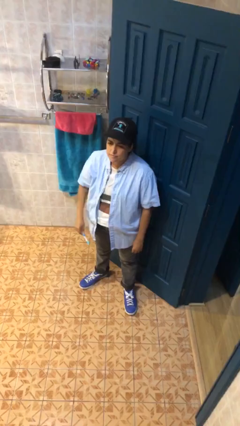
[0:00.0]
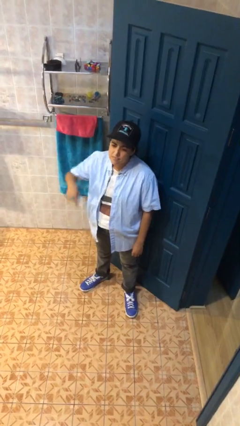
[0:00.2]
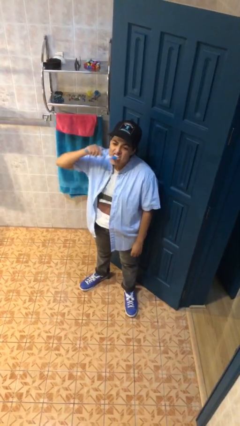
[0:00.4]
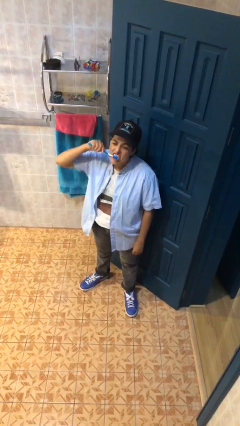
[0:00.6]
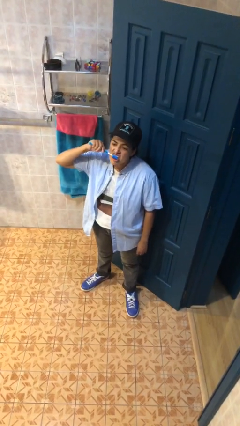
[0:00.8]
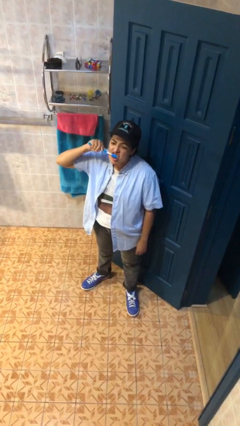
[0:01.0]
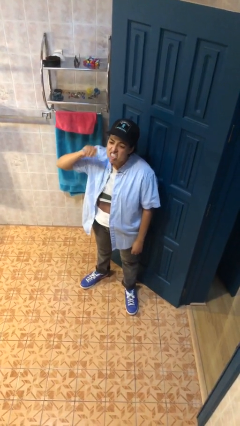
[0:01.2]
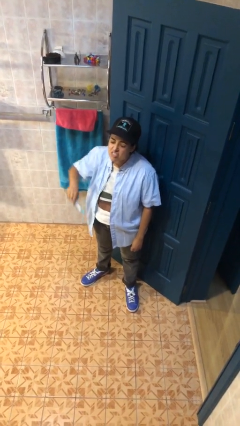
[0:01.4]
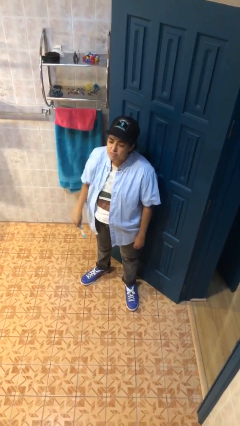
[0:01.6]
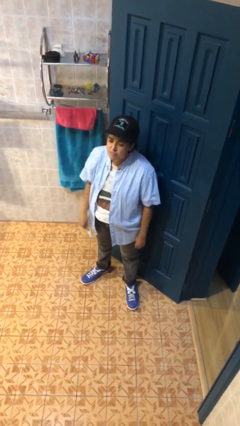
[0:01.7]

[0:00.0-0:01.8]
person brushes teeth

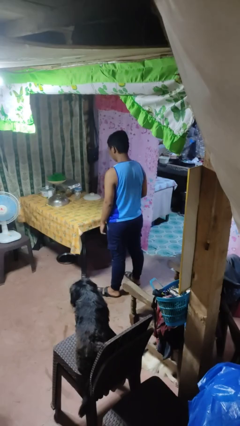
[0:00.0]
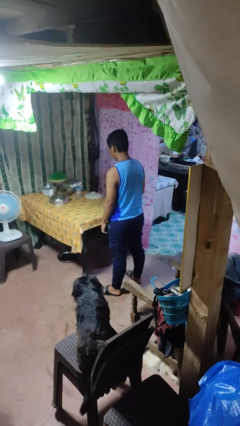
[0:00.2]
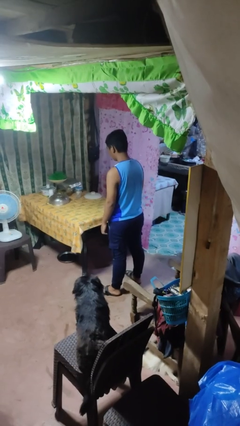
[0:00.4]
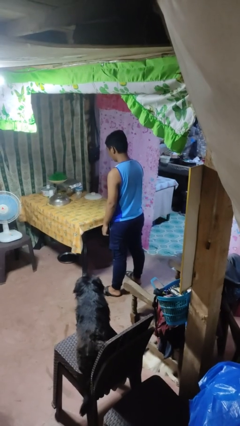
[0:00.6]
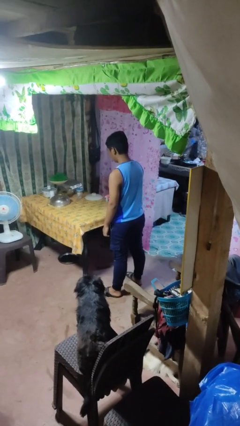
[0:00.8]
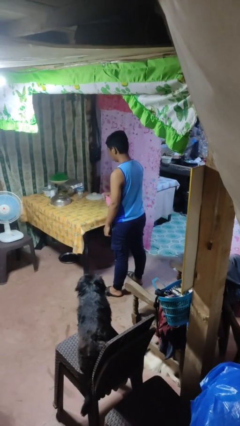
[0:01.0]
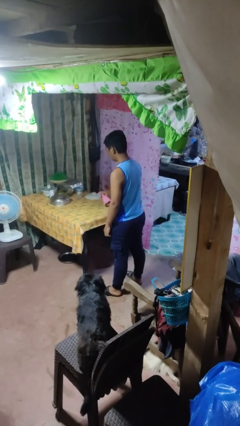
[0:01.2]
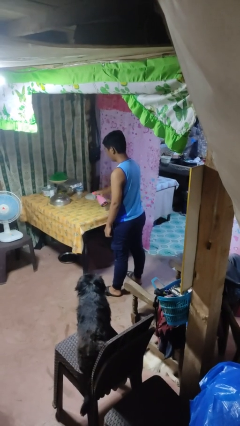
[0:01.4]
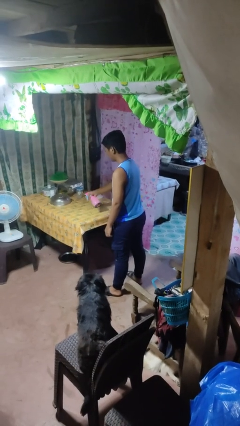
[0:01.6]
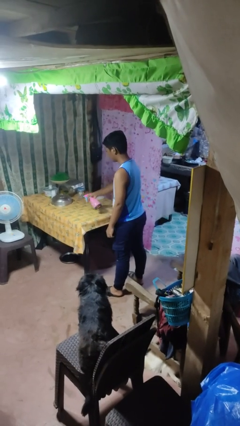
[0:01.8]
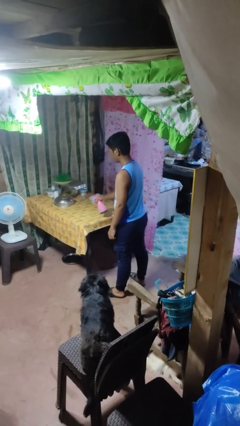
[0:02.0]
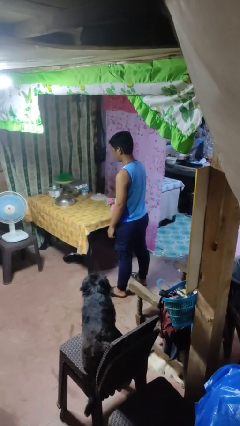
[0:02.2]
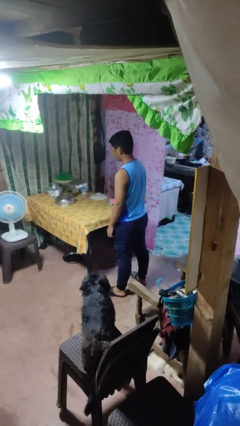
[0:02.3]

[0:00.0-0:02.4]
person sprays from bottle

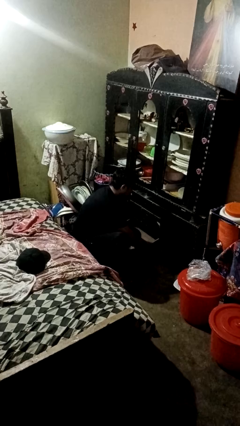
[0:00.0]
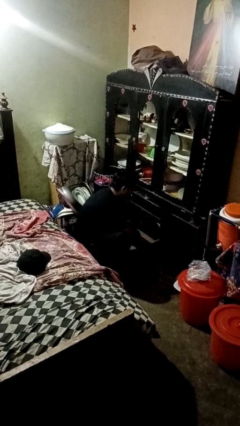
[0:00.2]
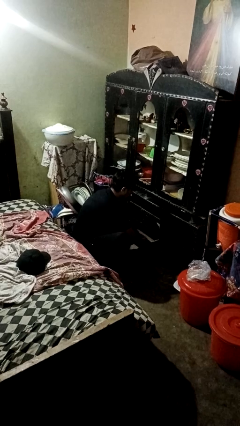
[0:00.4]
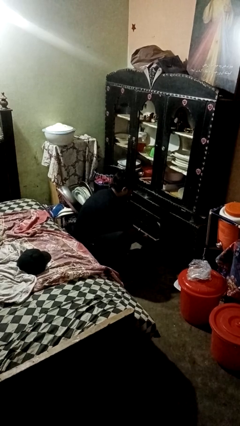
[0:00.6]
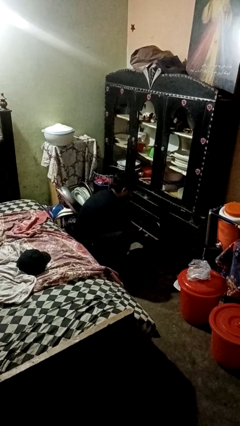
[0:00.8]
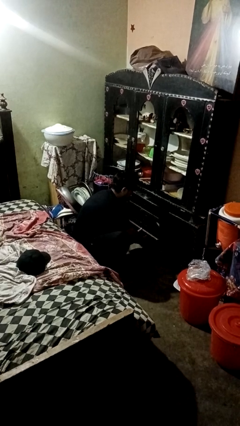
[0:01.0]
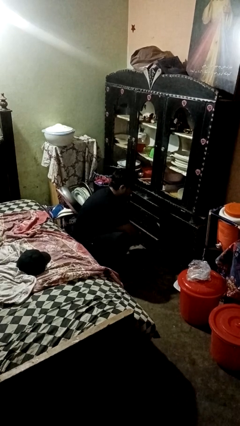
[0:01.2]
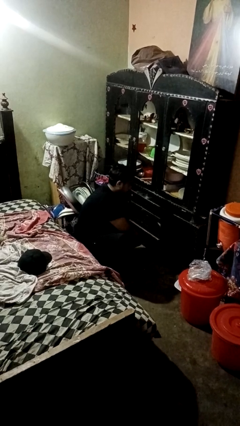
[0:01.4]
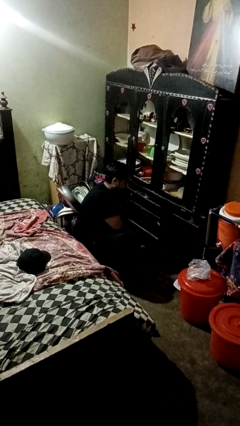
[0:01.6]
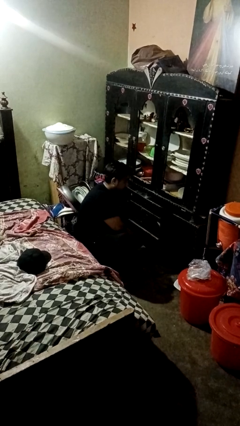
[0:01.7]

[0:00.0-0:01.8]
person closes kitchen drawer

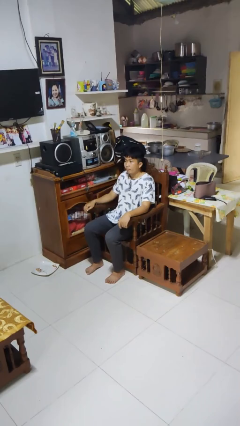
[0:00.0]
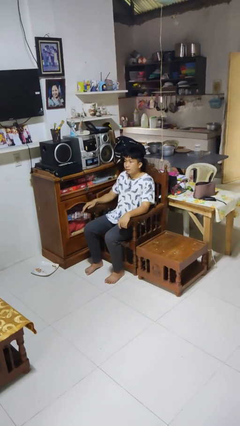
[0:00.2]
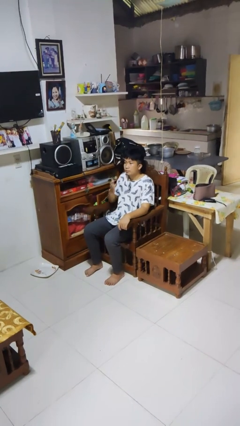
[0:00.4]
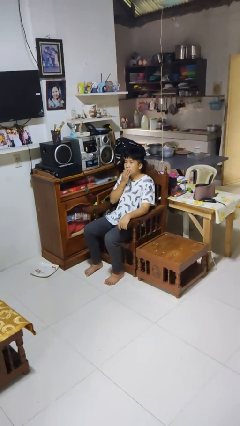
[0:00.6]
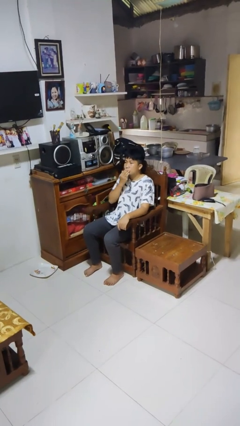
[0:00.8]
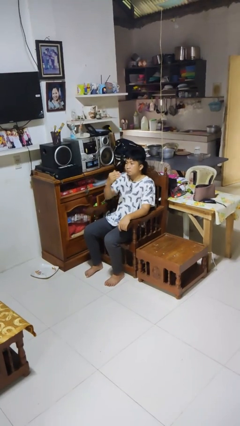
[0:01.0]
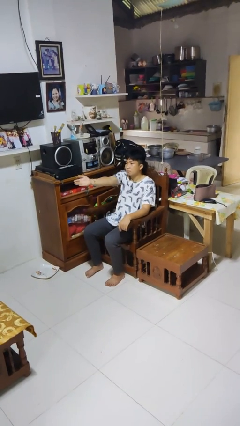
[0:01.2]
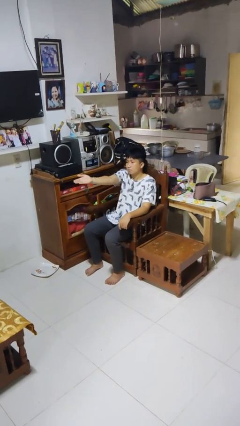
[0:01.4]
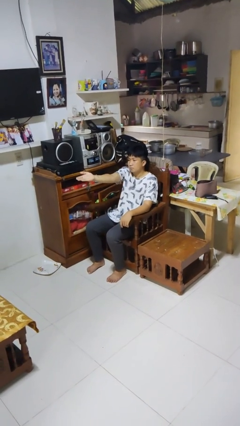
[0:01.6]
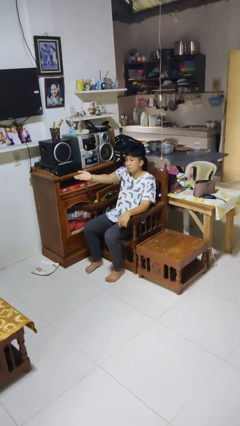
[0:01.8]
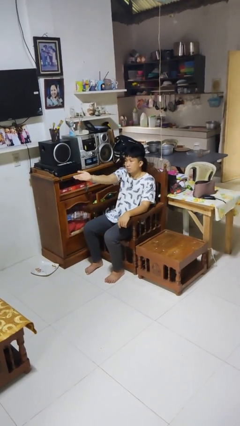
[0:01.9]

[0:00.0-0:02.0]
person gestures blow kiss

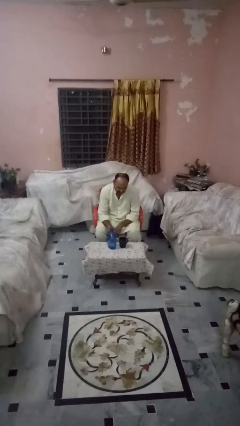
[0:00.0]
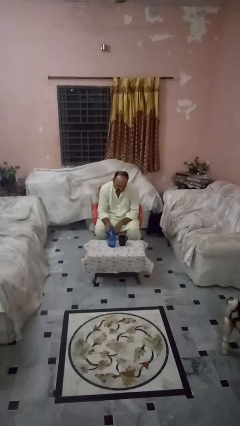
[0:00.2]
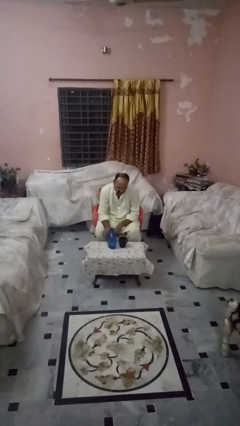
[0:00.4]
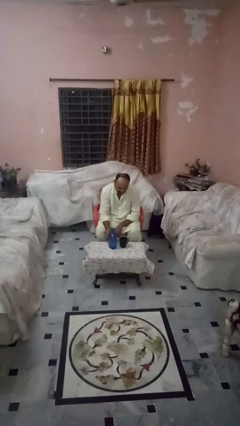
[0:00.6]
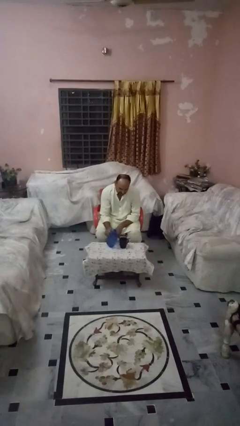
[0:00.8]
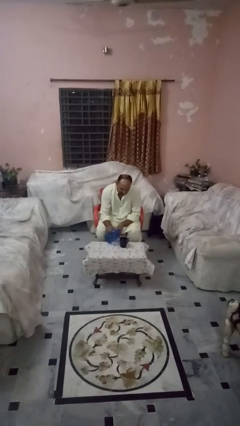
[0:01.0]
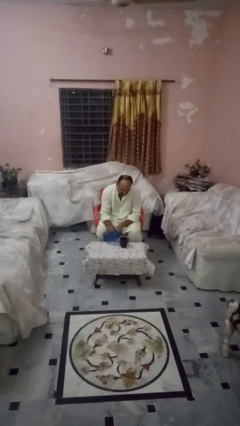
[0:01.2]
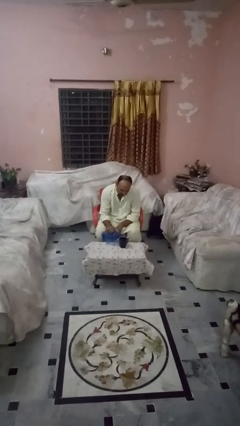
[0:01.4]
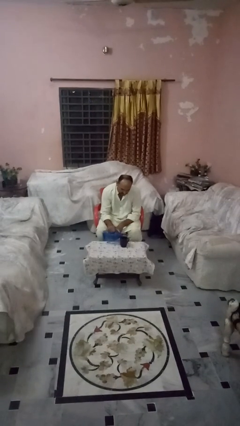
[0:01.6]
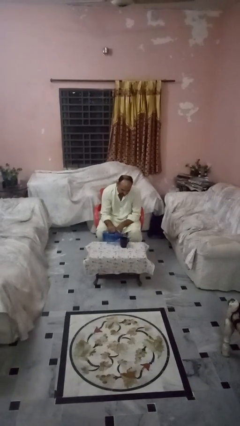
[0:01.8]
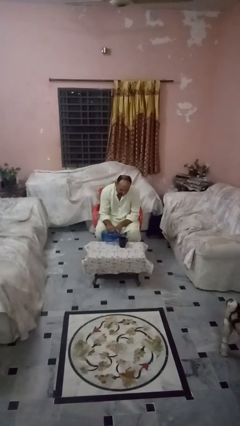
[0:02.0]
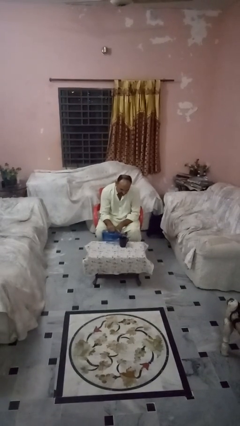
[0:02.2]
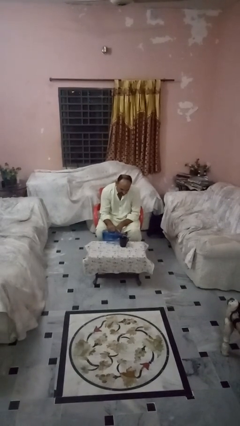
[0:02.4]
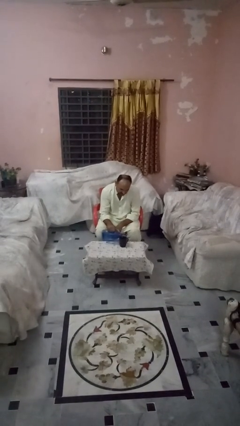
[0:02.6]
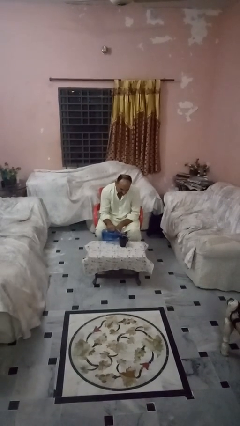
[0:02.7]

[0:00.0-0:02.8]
person pours liquid into cup

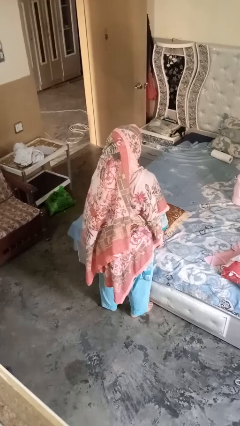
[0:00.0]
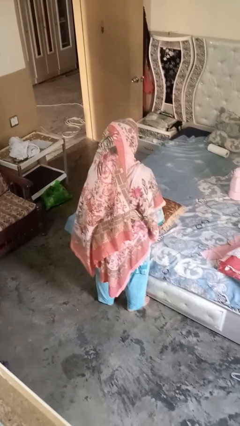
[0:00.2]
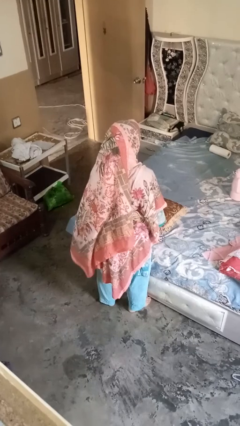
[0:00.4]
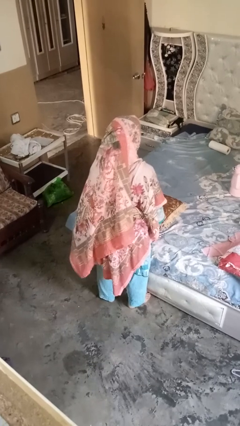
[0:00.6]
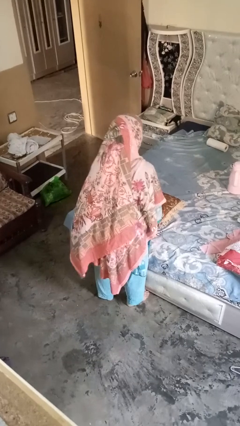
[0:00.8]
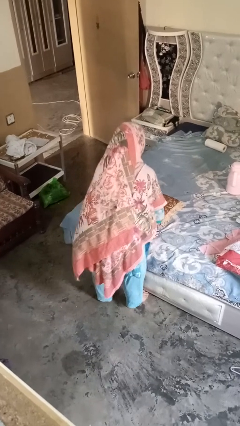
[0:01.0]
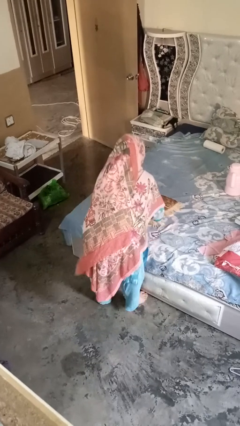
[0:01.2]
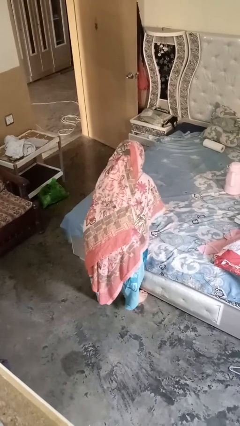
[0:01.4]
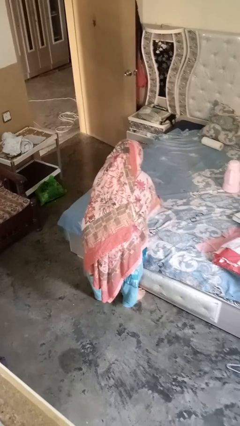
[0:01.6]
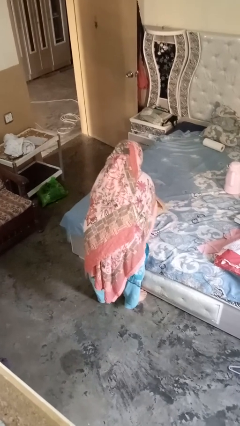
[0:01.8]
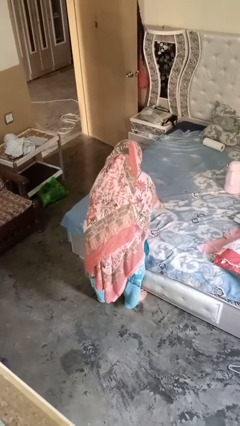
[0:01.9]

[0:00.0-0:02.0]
person searches under bed

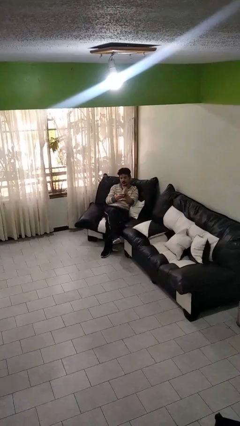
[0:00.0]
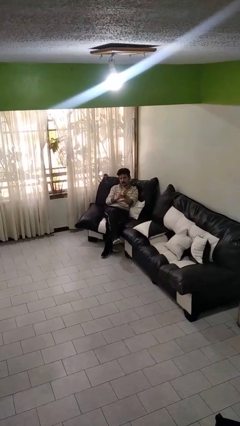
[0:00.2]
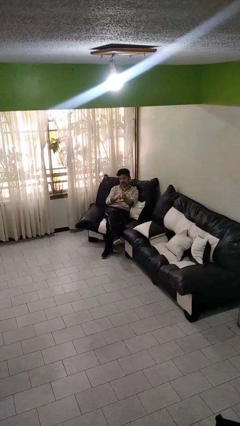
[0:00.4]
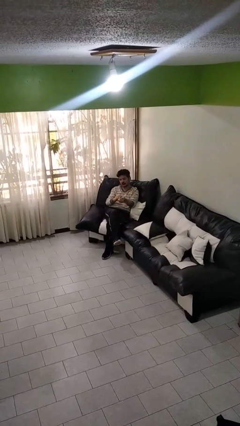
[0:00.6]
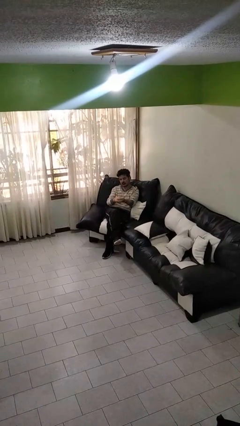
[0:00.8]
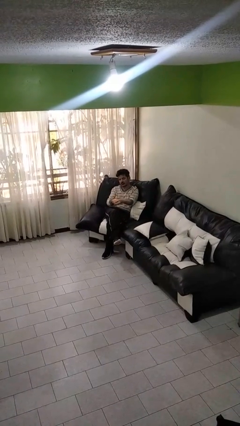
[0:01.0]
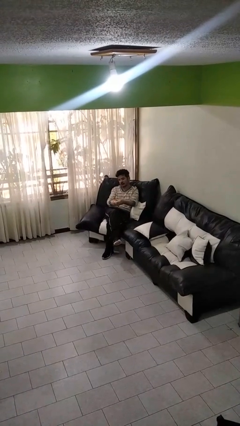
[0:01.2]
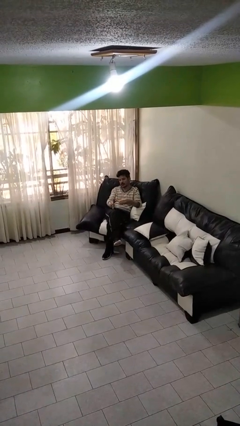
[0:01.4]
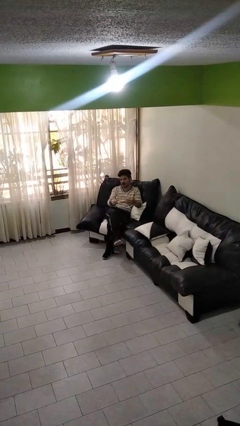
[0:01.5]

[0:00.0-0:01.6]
person takes off wristwatch

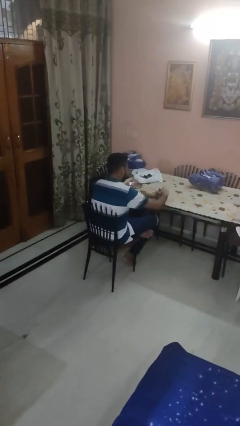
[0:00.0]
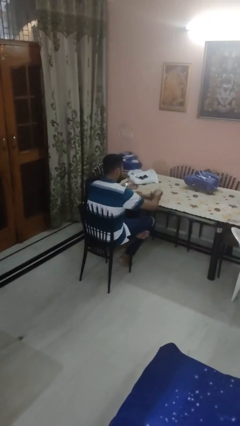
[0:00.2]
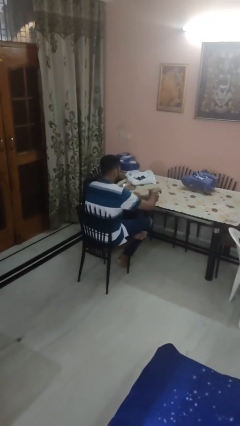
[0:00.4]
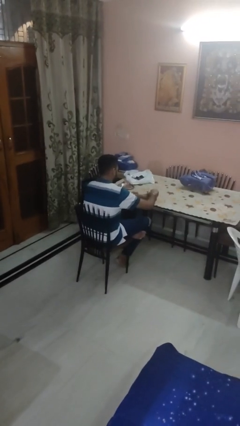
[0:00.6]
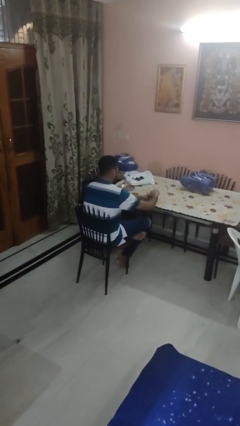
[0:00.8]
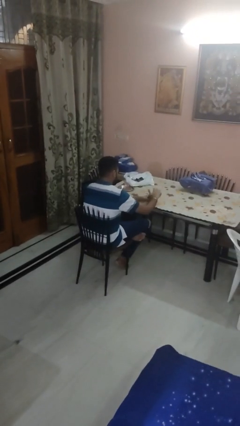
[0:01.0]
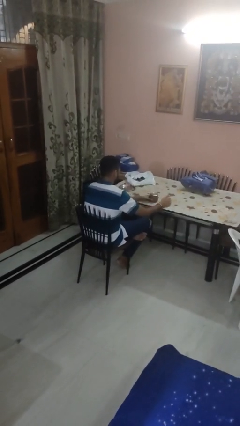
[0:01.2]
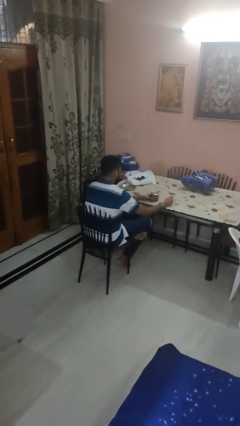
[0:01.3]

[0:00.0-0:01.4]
person closes jar

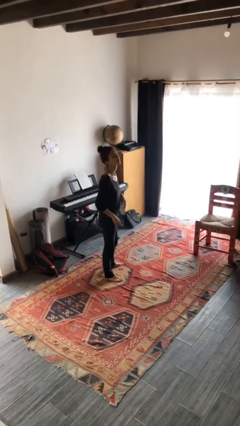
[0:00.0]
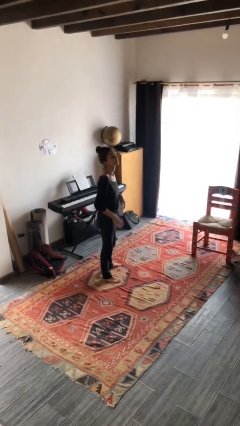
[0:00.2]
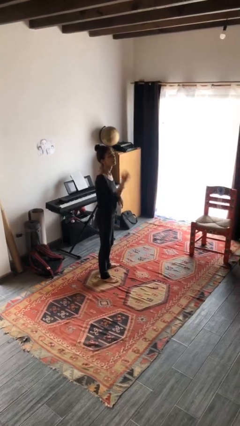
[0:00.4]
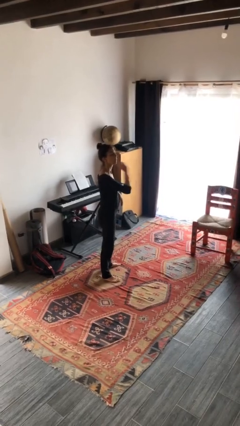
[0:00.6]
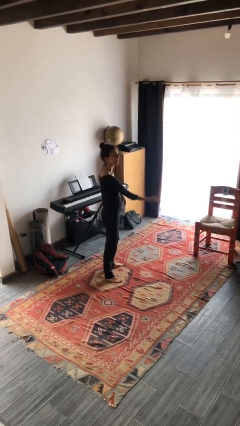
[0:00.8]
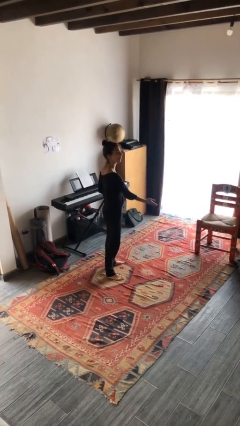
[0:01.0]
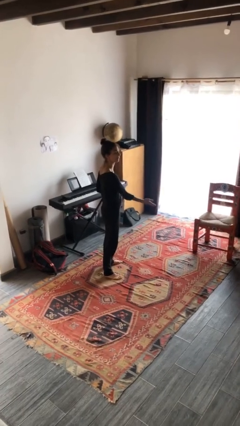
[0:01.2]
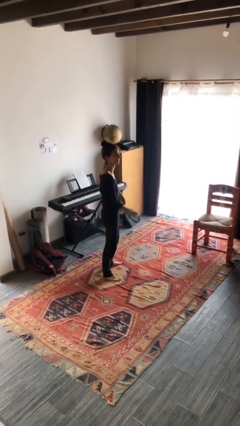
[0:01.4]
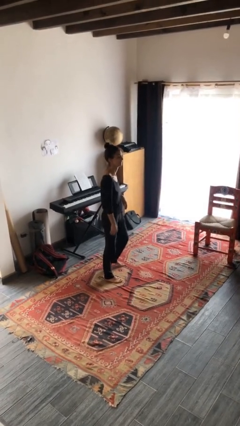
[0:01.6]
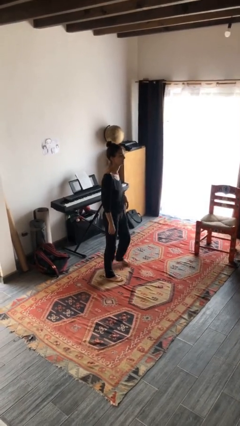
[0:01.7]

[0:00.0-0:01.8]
person karate chop
